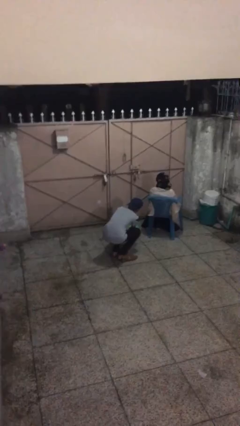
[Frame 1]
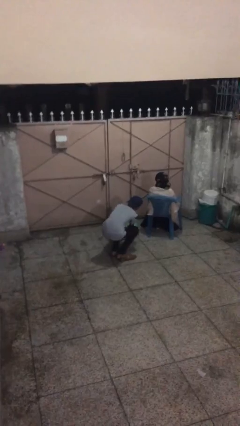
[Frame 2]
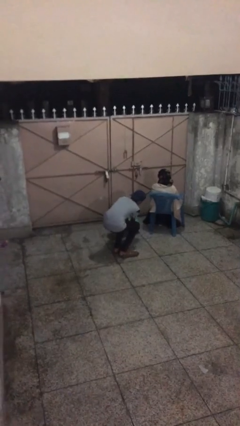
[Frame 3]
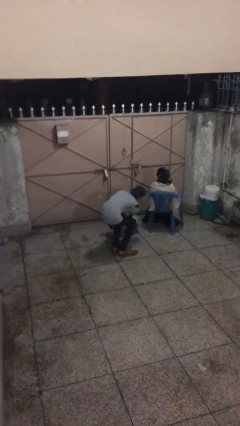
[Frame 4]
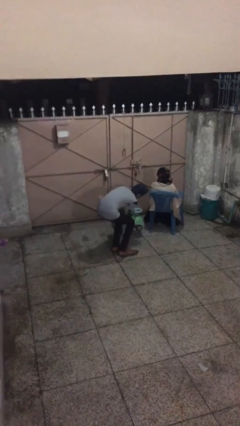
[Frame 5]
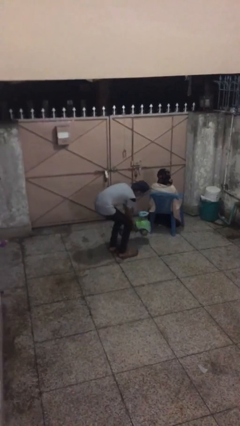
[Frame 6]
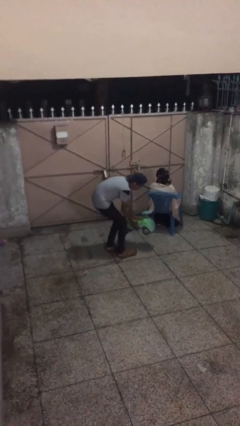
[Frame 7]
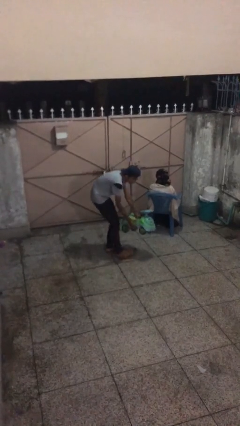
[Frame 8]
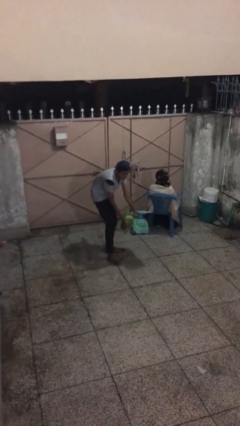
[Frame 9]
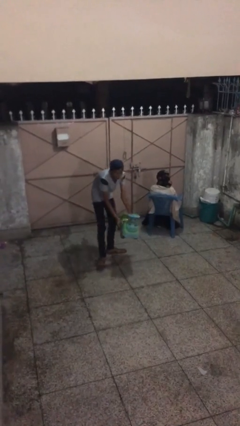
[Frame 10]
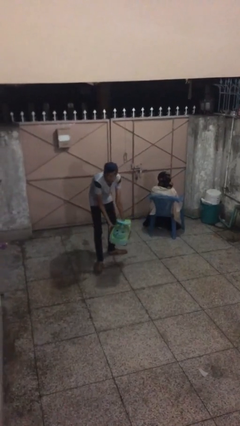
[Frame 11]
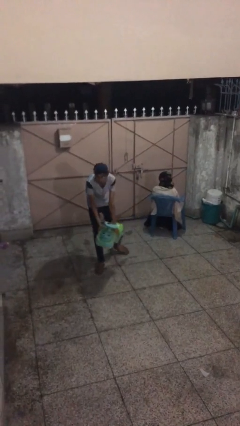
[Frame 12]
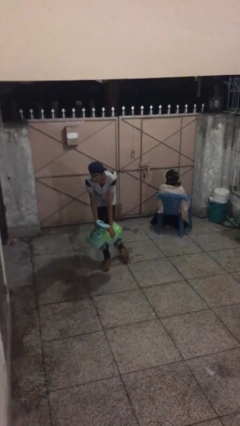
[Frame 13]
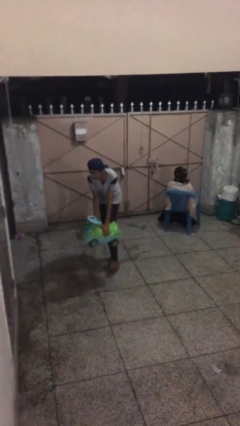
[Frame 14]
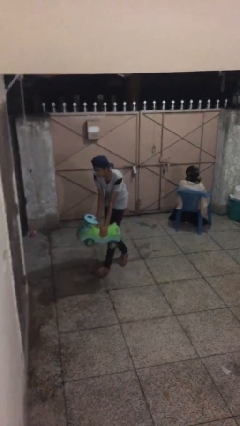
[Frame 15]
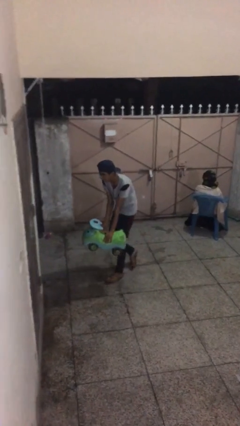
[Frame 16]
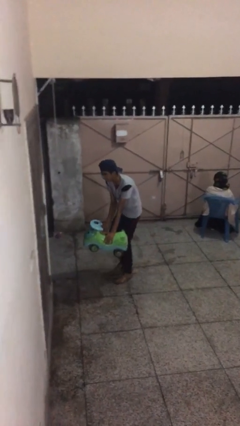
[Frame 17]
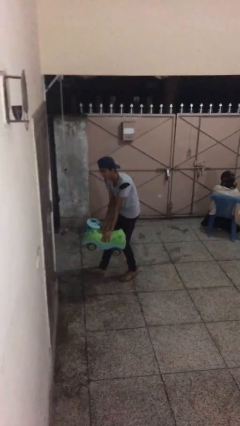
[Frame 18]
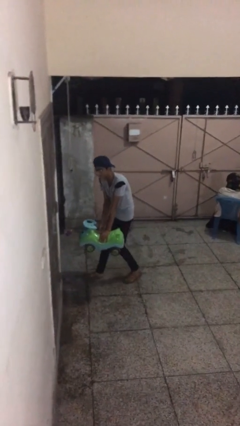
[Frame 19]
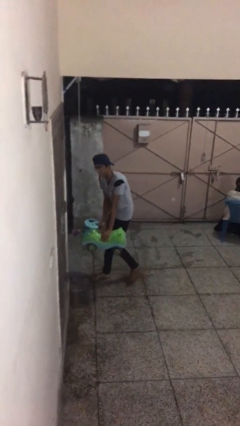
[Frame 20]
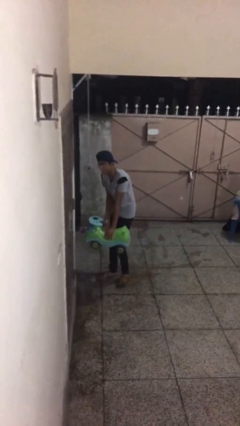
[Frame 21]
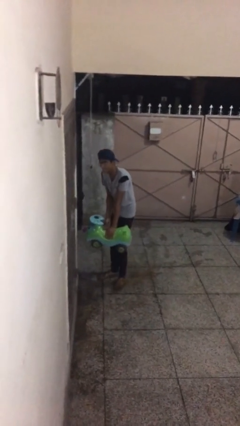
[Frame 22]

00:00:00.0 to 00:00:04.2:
person steals object from person

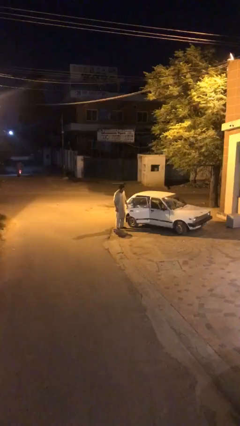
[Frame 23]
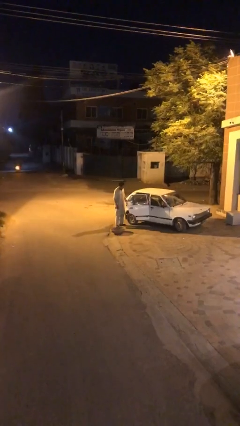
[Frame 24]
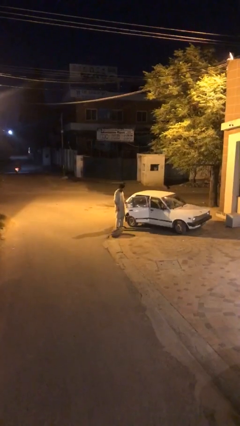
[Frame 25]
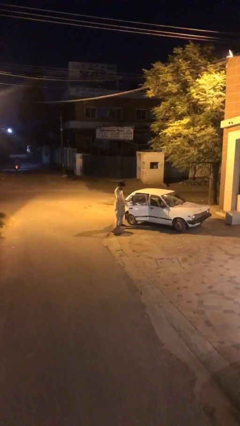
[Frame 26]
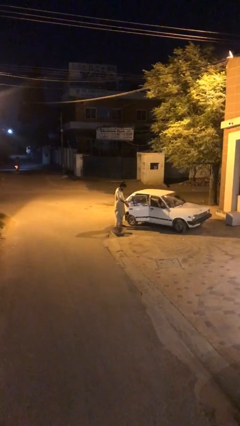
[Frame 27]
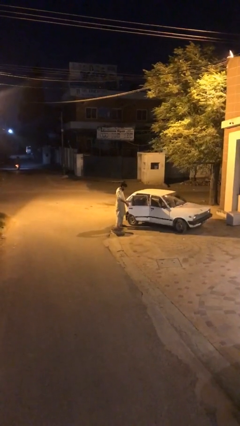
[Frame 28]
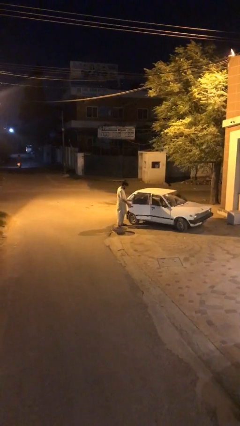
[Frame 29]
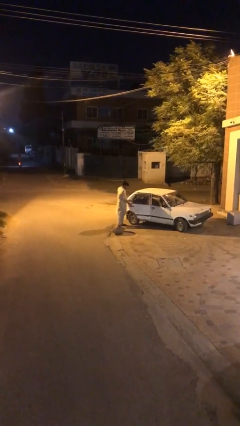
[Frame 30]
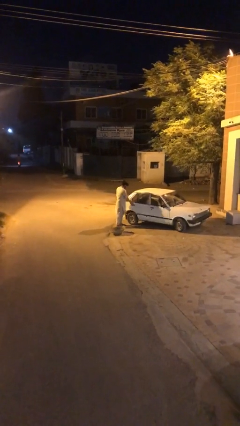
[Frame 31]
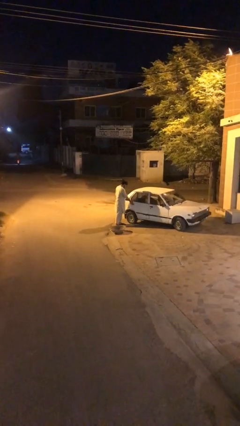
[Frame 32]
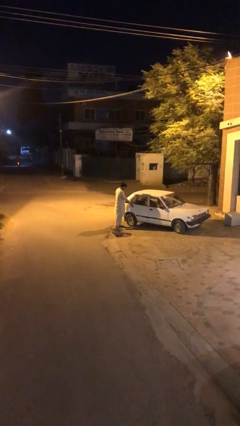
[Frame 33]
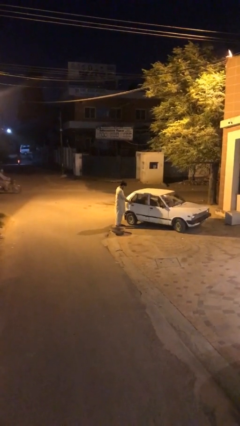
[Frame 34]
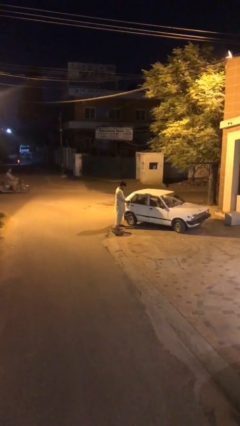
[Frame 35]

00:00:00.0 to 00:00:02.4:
person closes car door

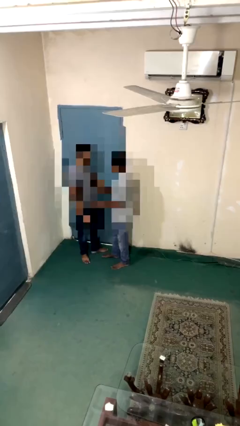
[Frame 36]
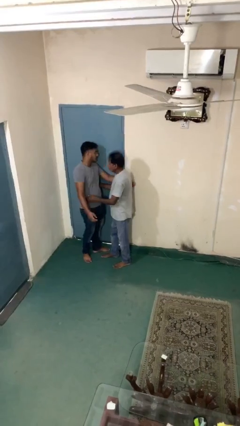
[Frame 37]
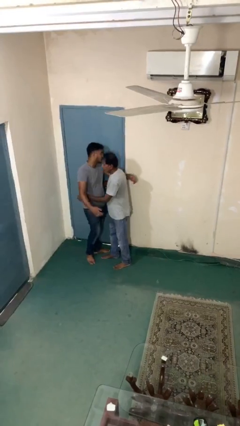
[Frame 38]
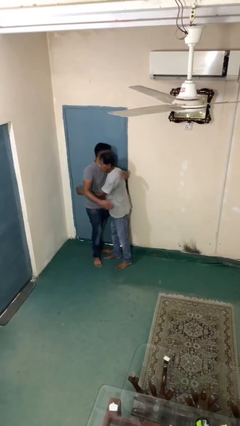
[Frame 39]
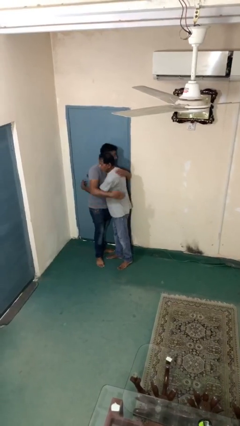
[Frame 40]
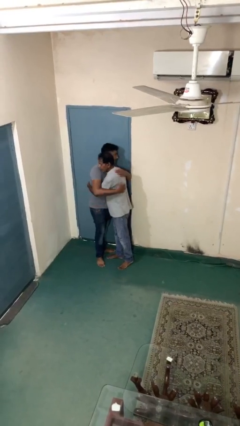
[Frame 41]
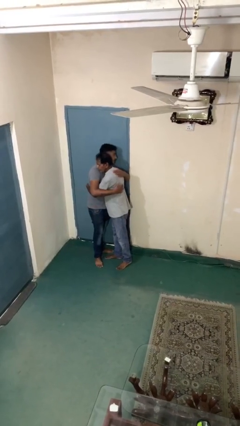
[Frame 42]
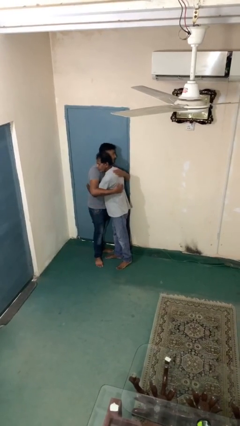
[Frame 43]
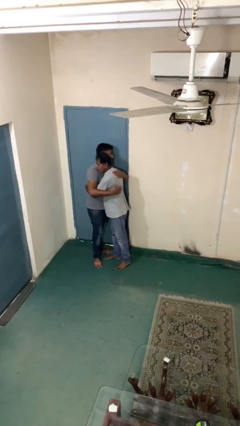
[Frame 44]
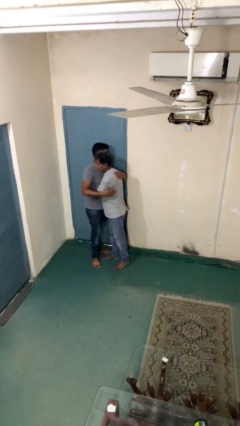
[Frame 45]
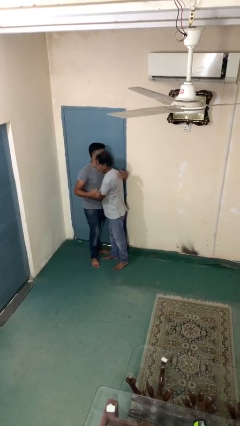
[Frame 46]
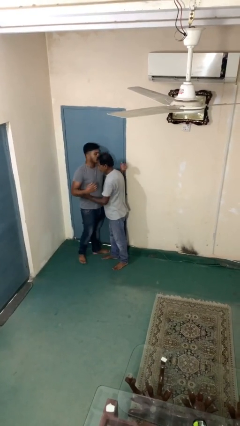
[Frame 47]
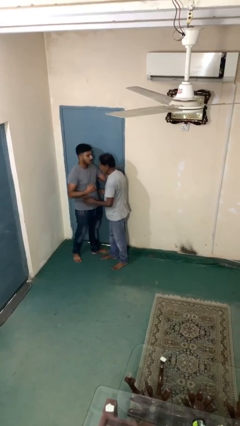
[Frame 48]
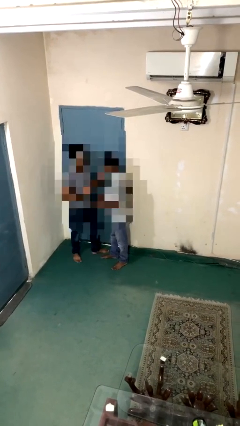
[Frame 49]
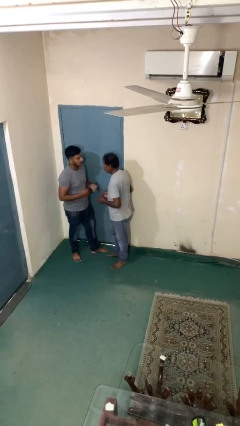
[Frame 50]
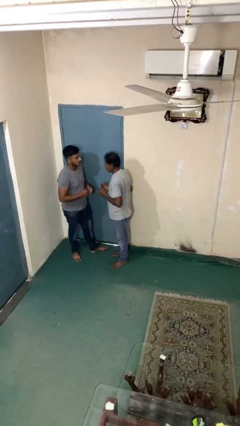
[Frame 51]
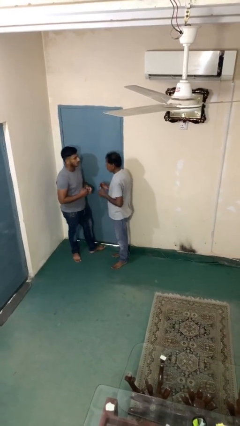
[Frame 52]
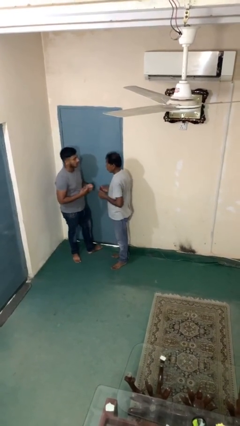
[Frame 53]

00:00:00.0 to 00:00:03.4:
person embraces person

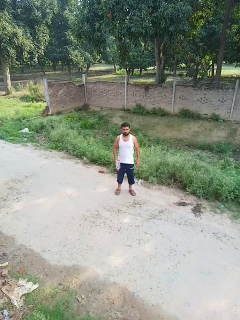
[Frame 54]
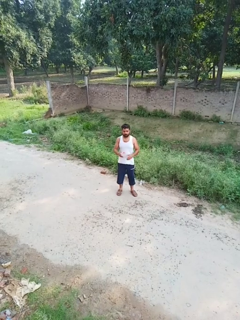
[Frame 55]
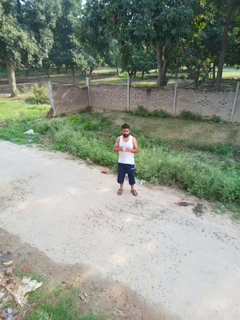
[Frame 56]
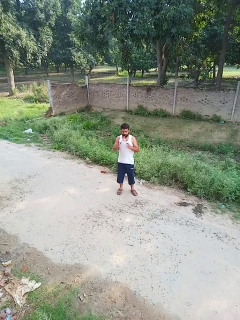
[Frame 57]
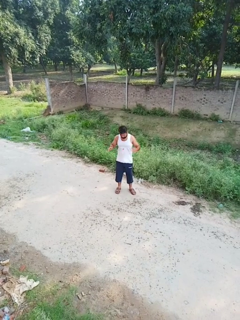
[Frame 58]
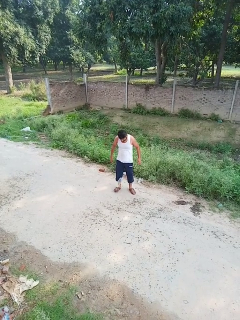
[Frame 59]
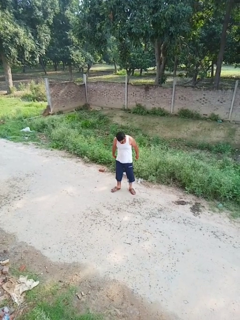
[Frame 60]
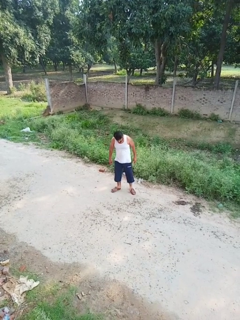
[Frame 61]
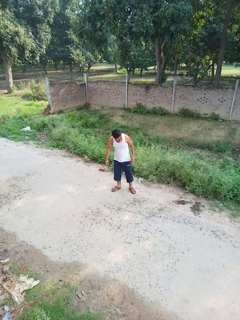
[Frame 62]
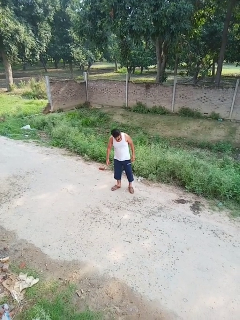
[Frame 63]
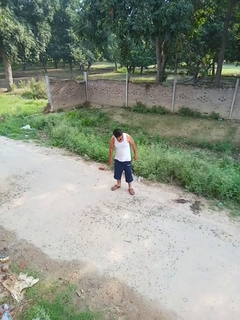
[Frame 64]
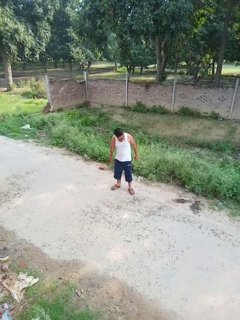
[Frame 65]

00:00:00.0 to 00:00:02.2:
person drops object

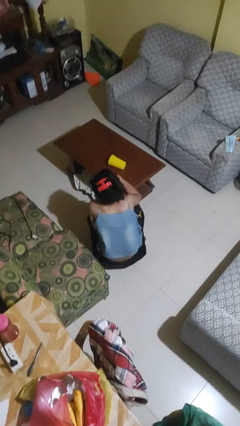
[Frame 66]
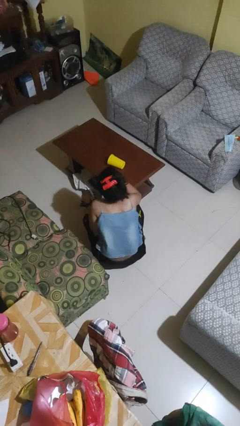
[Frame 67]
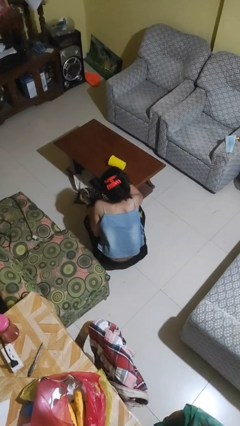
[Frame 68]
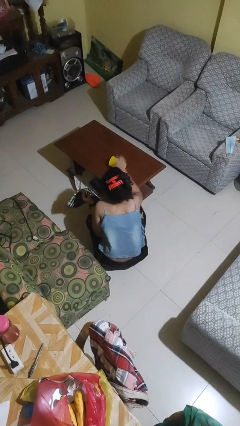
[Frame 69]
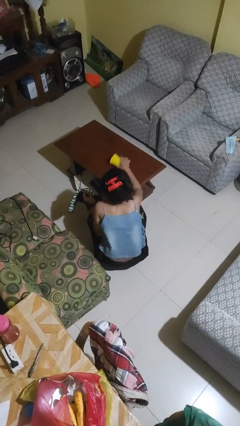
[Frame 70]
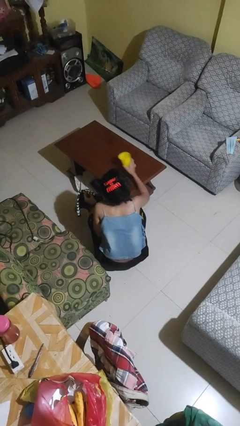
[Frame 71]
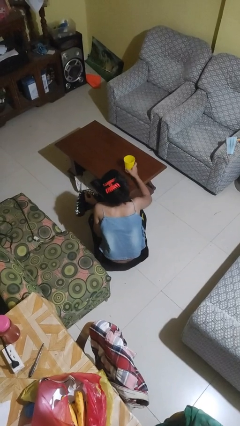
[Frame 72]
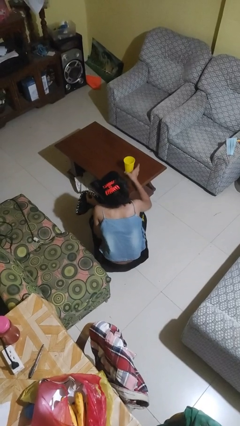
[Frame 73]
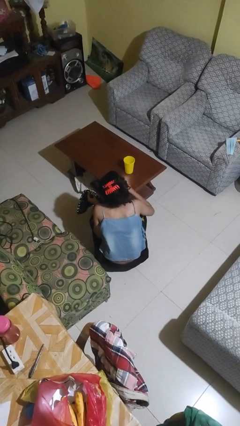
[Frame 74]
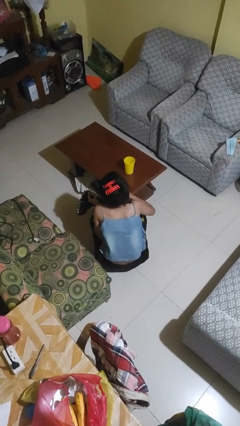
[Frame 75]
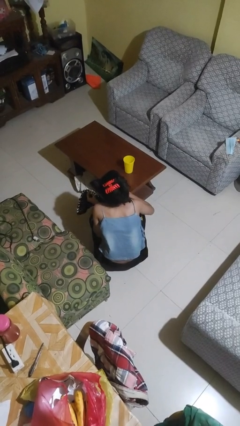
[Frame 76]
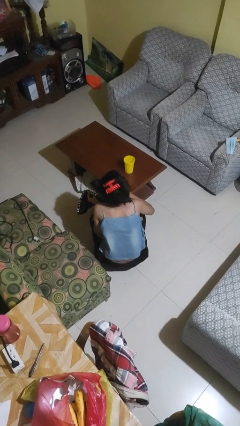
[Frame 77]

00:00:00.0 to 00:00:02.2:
person sets upright glass

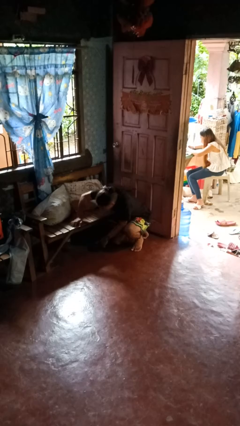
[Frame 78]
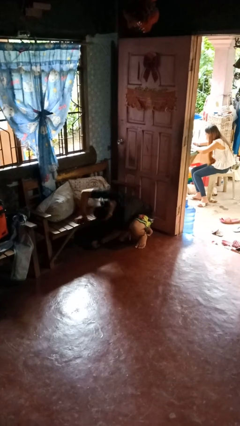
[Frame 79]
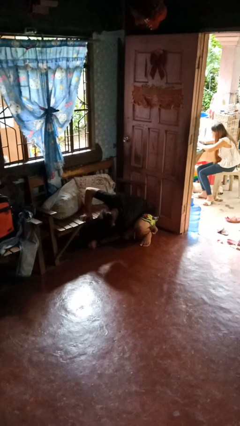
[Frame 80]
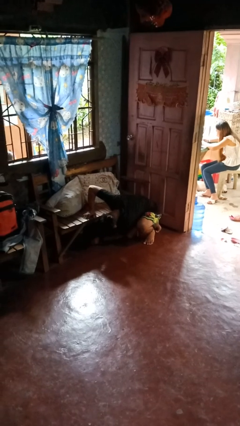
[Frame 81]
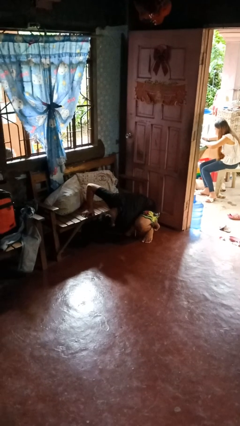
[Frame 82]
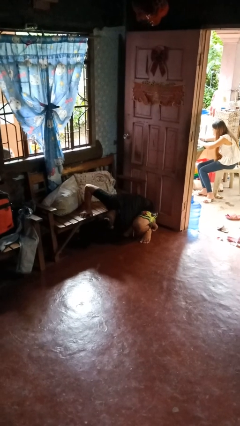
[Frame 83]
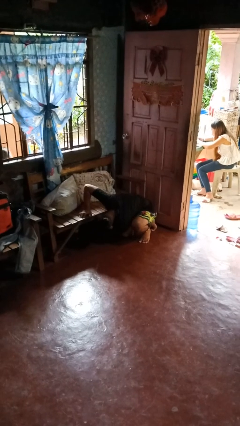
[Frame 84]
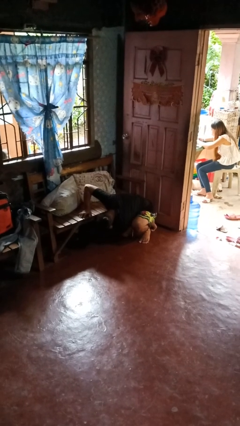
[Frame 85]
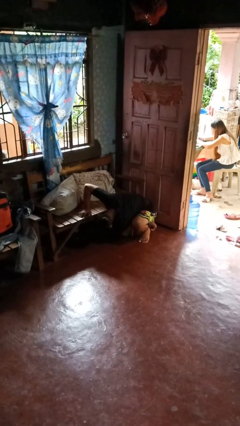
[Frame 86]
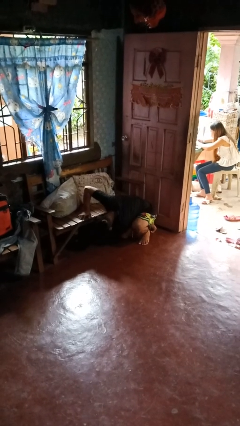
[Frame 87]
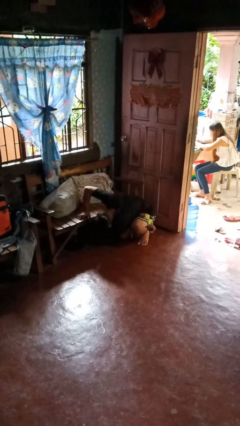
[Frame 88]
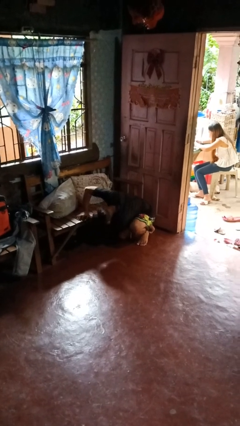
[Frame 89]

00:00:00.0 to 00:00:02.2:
person searches under couch

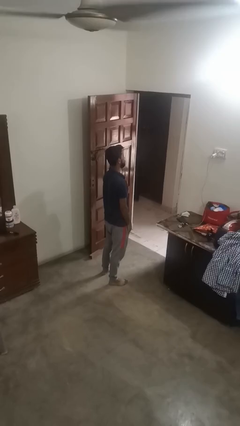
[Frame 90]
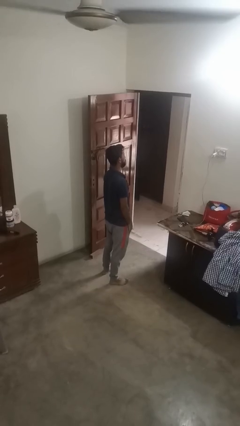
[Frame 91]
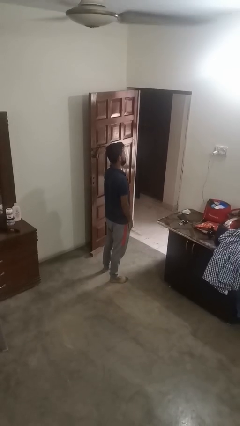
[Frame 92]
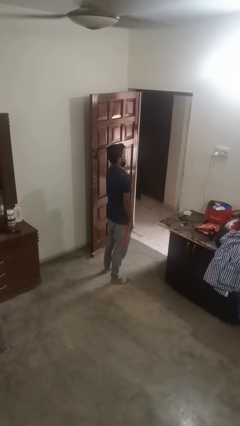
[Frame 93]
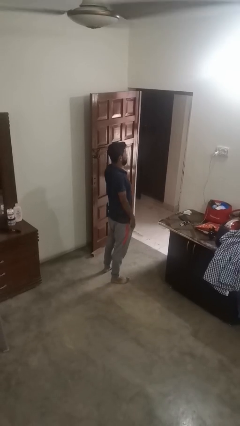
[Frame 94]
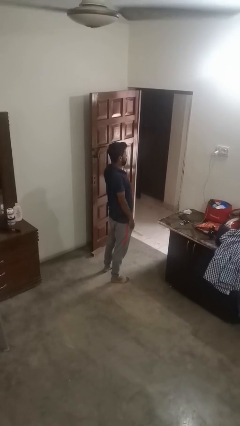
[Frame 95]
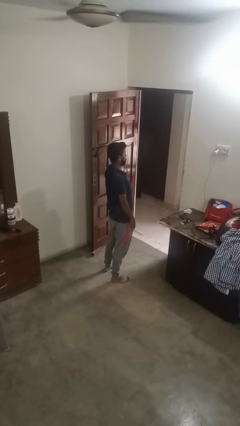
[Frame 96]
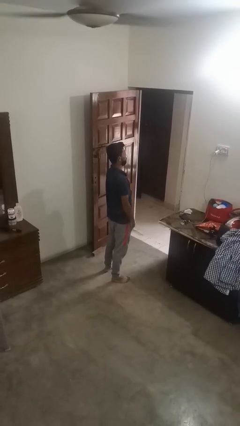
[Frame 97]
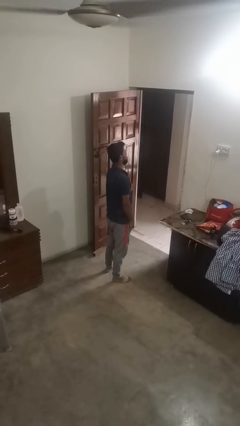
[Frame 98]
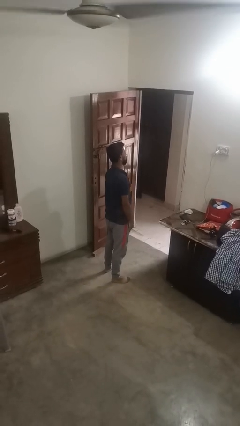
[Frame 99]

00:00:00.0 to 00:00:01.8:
person shrugs
